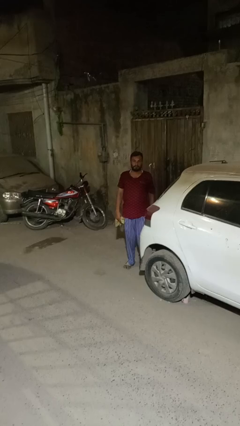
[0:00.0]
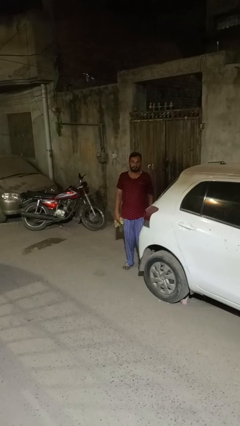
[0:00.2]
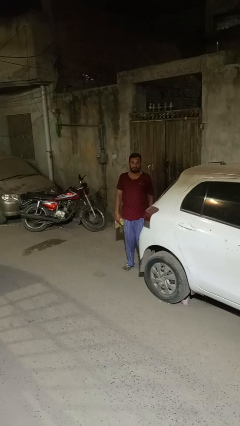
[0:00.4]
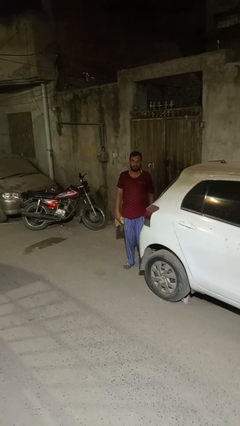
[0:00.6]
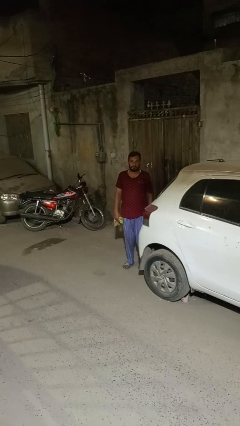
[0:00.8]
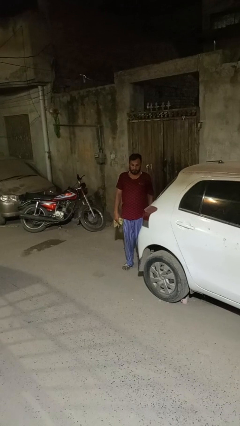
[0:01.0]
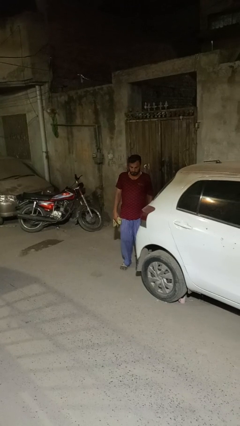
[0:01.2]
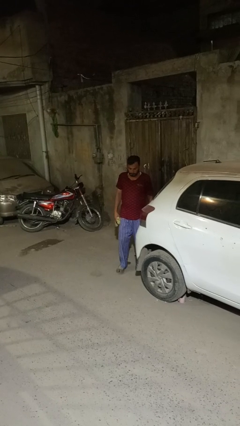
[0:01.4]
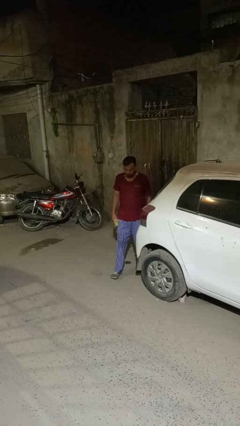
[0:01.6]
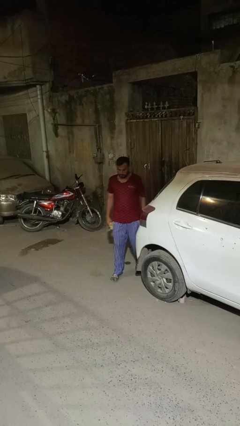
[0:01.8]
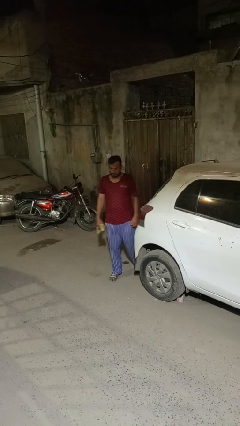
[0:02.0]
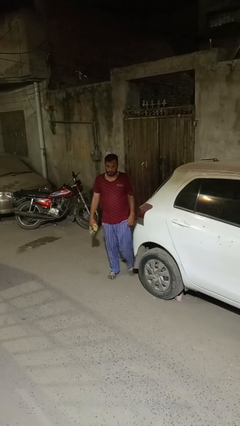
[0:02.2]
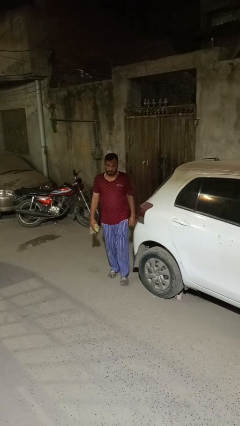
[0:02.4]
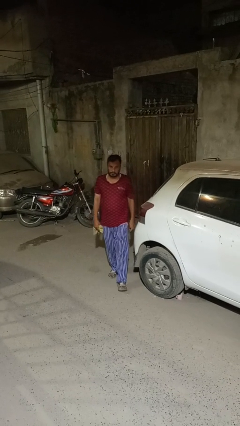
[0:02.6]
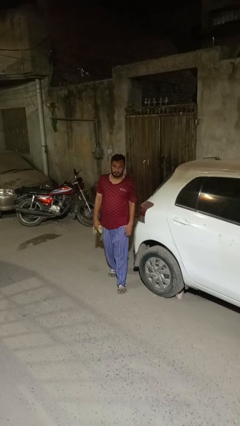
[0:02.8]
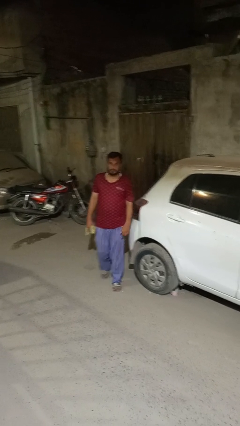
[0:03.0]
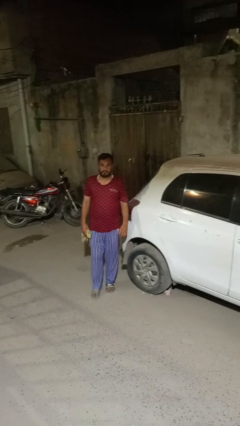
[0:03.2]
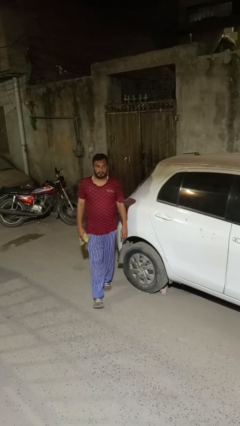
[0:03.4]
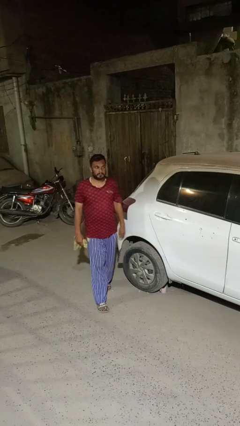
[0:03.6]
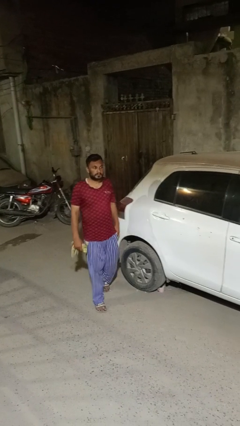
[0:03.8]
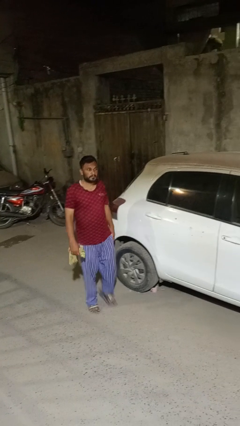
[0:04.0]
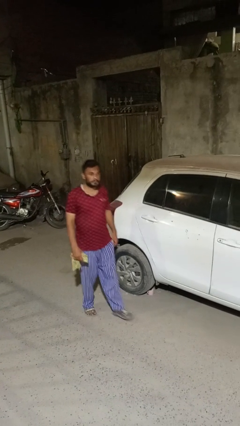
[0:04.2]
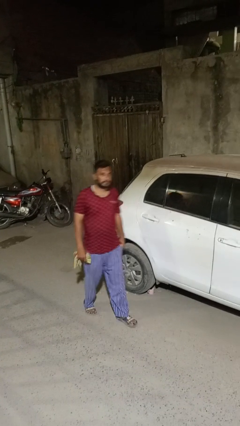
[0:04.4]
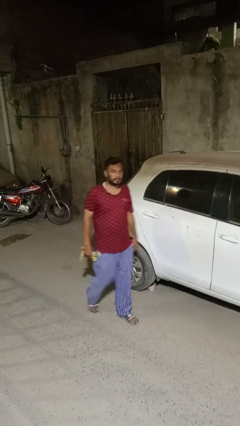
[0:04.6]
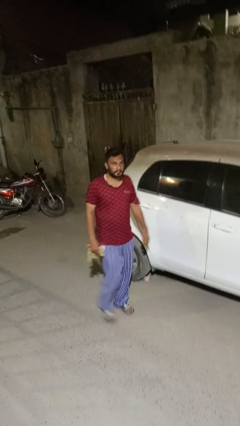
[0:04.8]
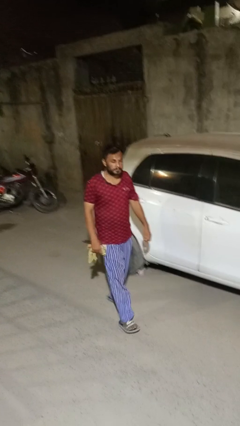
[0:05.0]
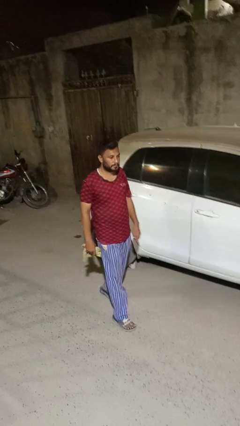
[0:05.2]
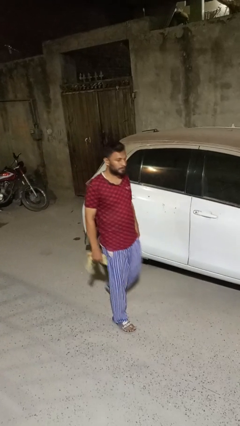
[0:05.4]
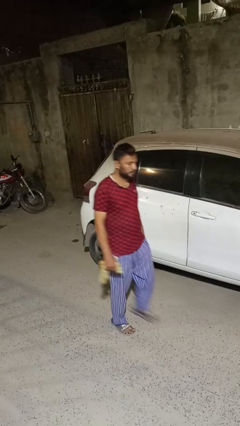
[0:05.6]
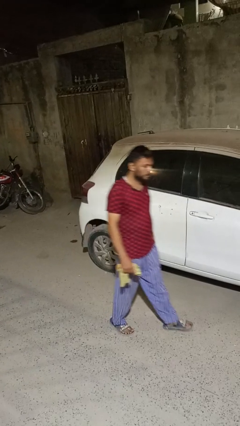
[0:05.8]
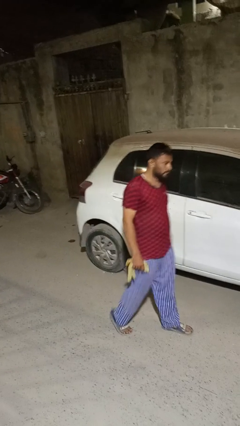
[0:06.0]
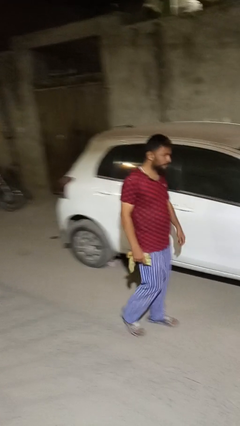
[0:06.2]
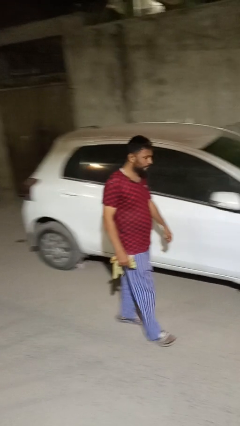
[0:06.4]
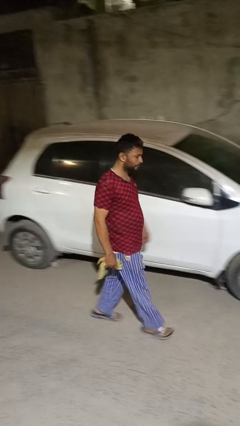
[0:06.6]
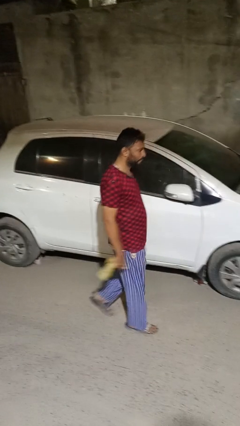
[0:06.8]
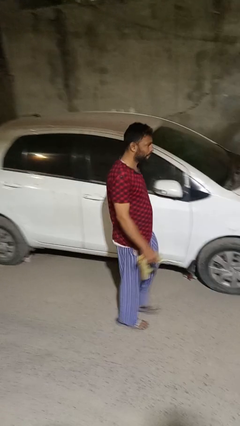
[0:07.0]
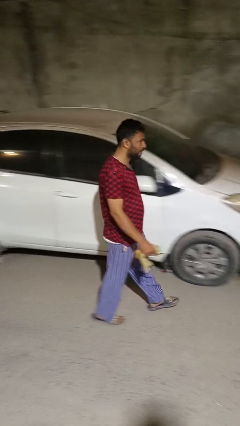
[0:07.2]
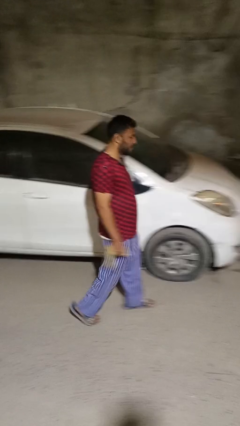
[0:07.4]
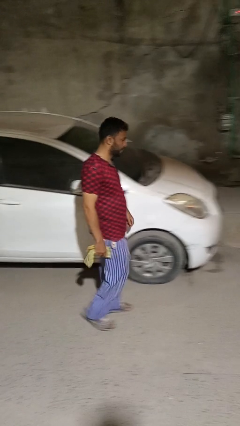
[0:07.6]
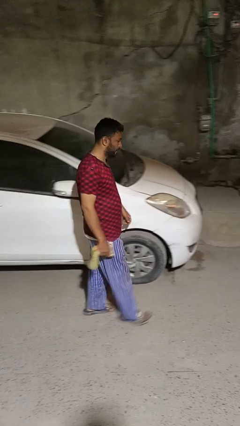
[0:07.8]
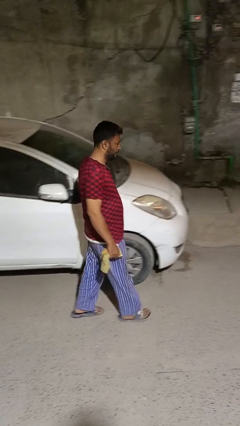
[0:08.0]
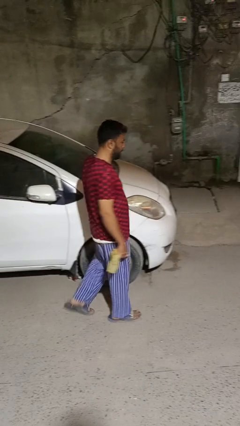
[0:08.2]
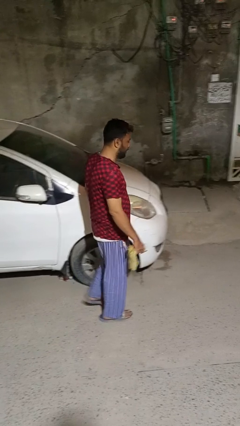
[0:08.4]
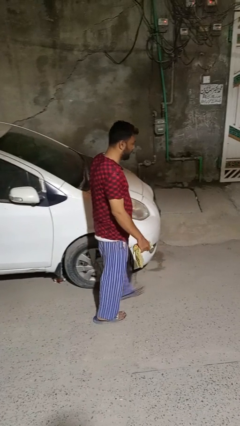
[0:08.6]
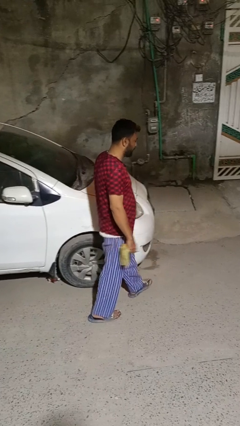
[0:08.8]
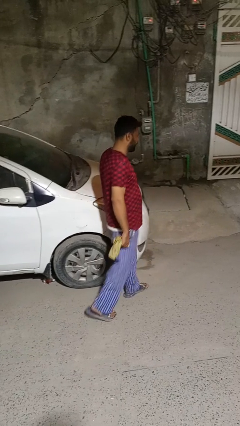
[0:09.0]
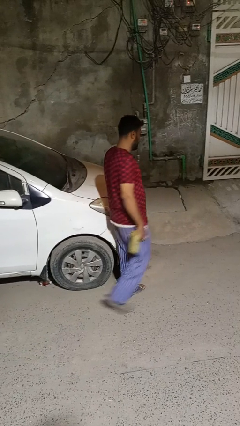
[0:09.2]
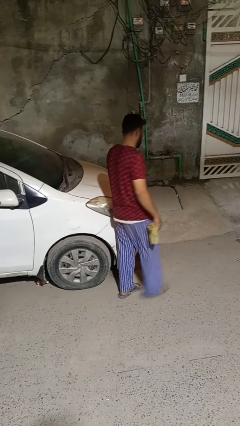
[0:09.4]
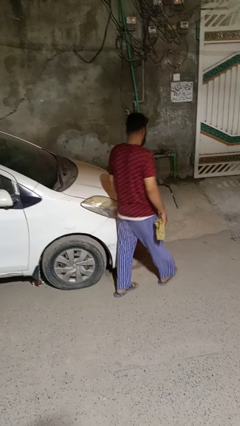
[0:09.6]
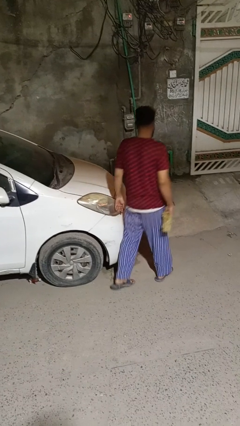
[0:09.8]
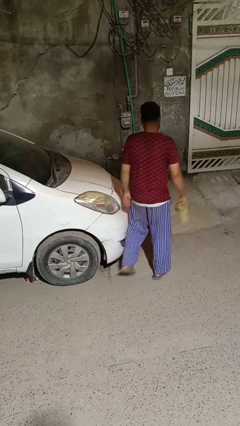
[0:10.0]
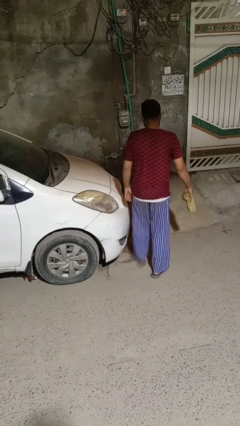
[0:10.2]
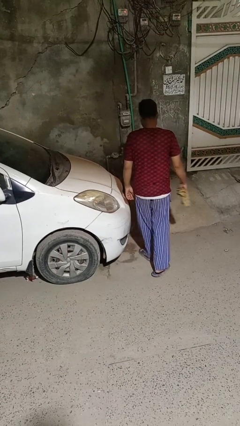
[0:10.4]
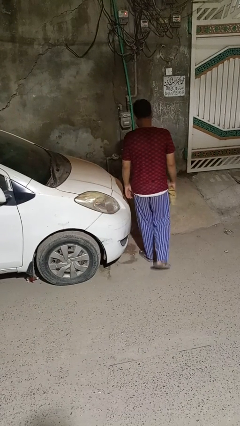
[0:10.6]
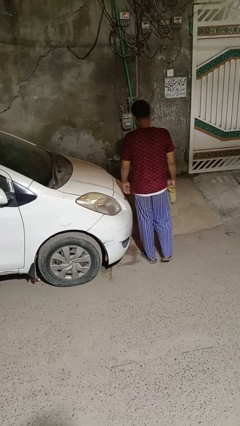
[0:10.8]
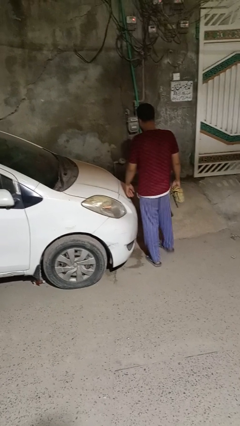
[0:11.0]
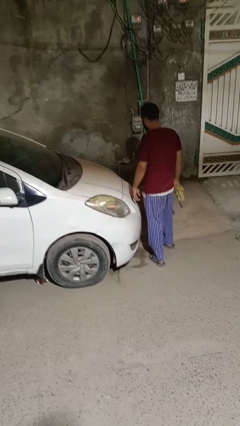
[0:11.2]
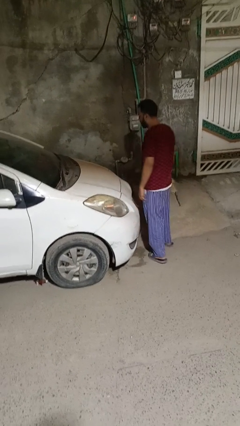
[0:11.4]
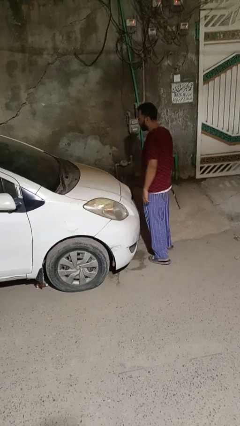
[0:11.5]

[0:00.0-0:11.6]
person walks around car

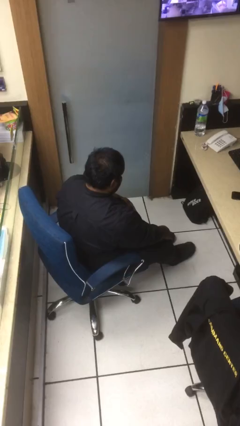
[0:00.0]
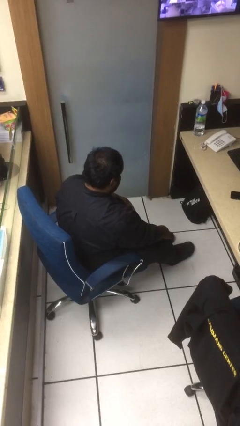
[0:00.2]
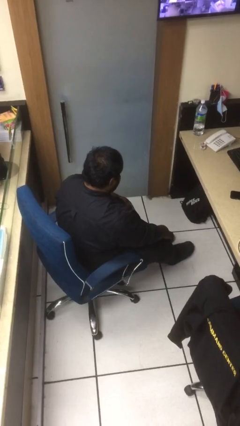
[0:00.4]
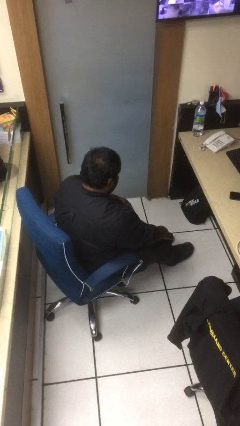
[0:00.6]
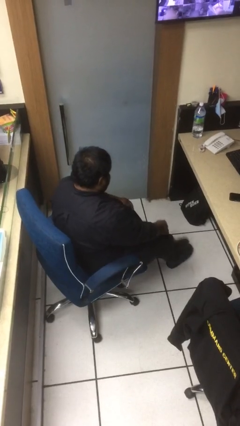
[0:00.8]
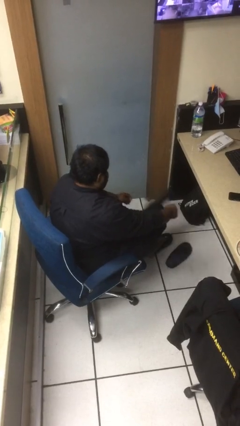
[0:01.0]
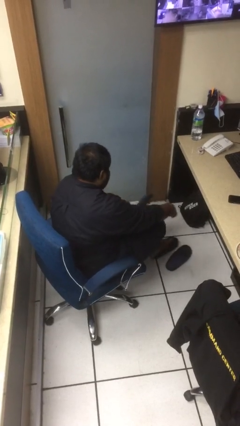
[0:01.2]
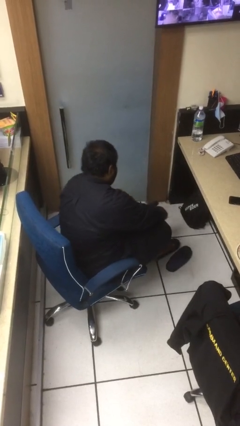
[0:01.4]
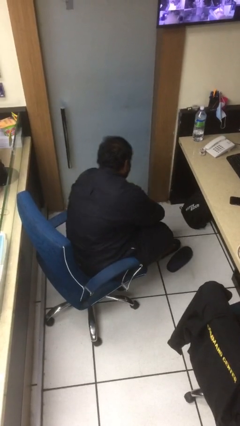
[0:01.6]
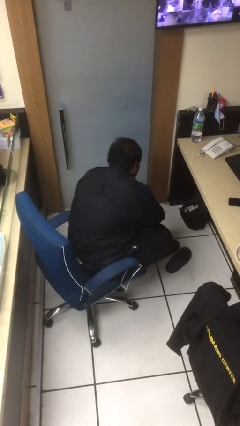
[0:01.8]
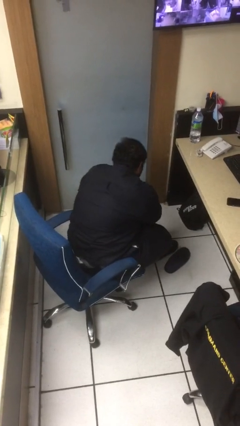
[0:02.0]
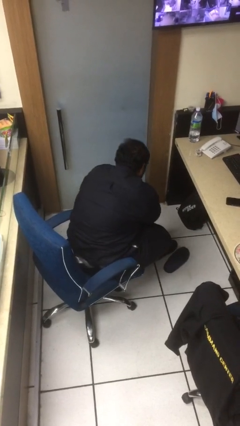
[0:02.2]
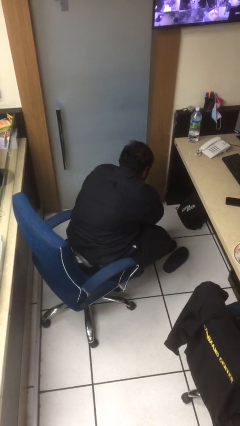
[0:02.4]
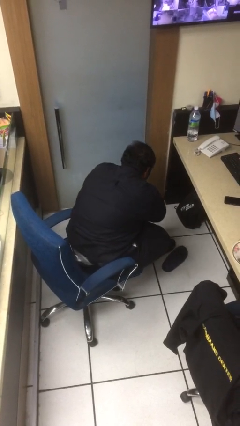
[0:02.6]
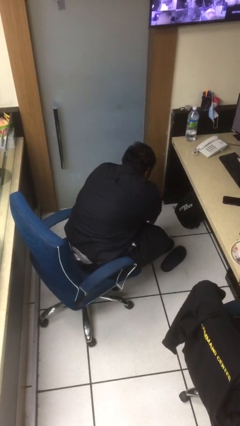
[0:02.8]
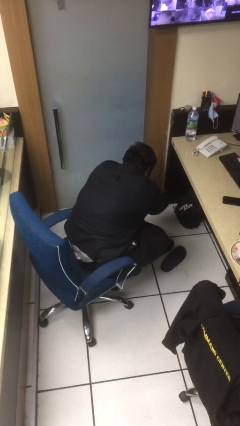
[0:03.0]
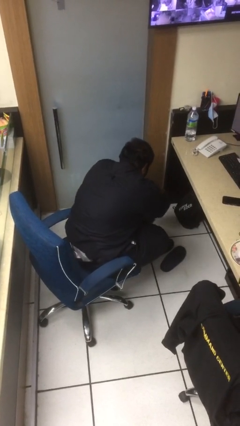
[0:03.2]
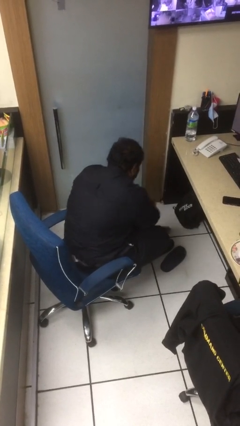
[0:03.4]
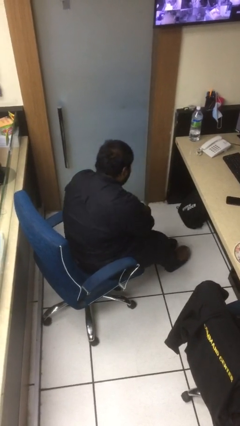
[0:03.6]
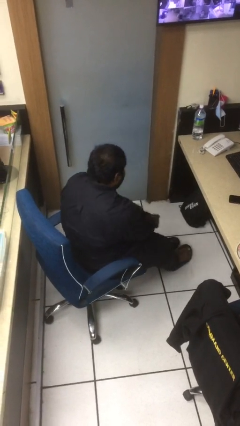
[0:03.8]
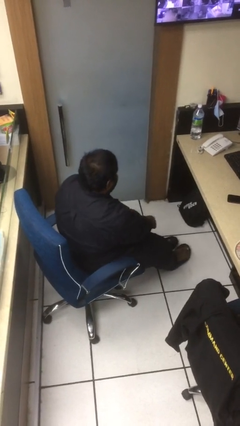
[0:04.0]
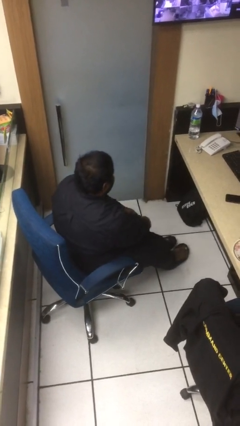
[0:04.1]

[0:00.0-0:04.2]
person takes off socks

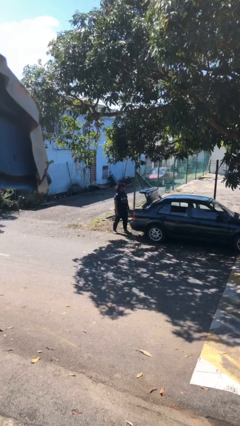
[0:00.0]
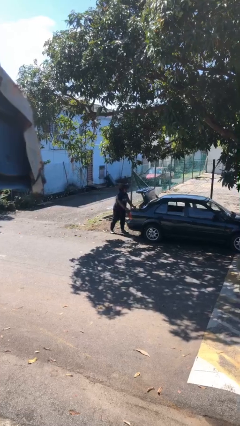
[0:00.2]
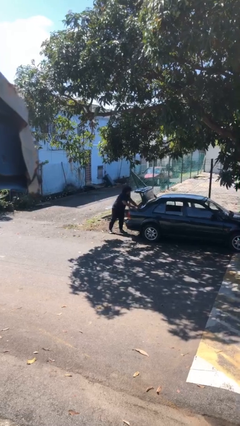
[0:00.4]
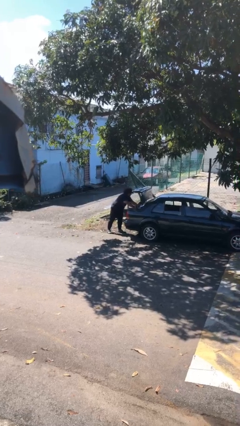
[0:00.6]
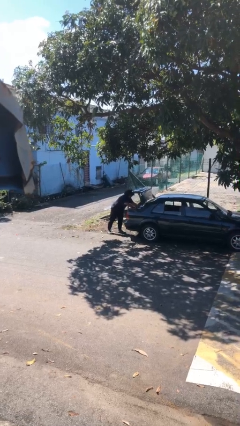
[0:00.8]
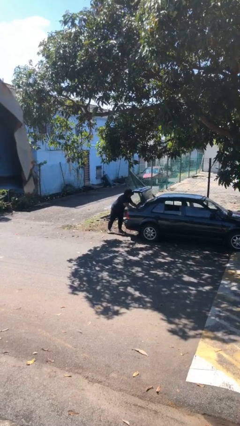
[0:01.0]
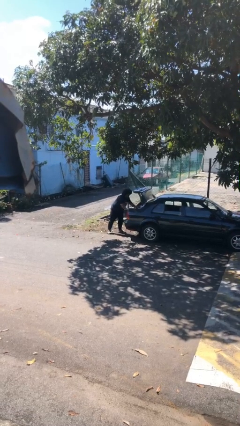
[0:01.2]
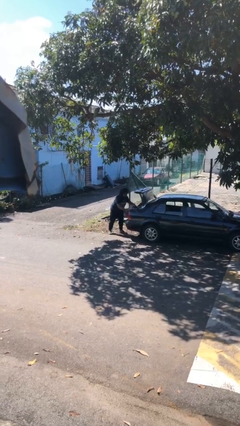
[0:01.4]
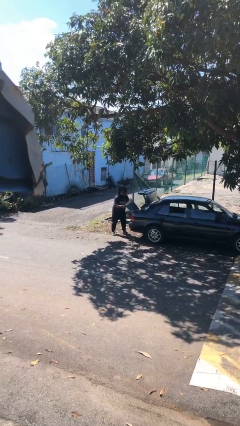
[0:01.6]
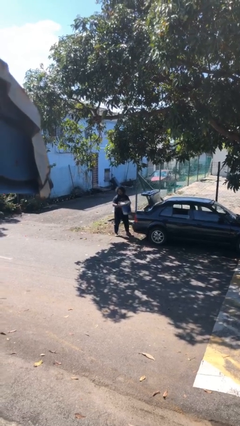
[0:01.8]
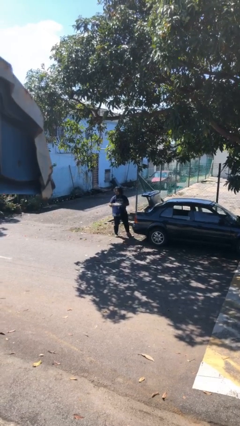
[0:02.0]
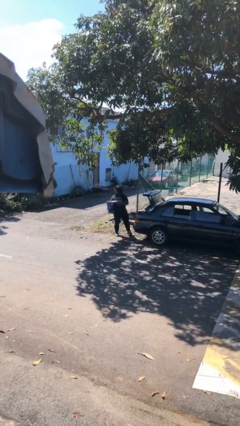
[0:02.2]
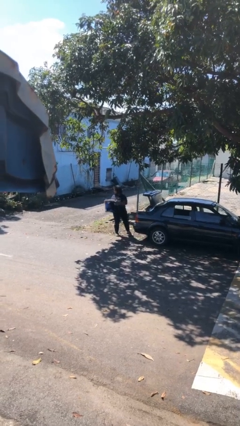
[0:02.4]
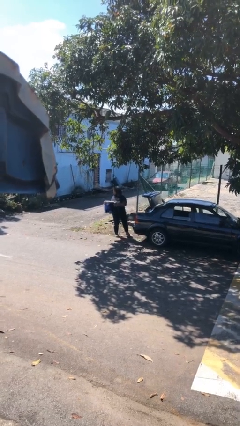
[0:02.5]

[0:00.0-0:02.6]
person unloads car
